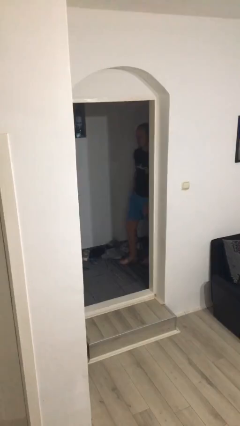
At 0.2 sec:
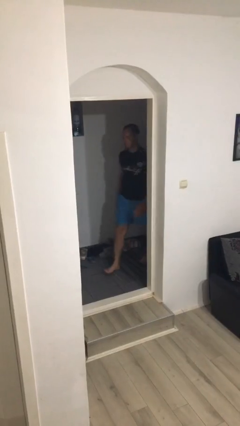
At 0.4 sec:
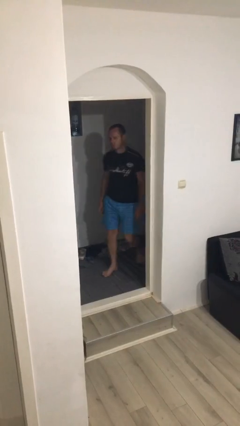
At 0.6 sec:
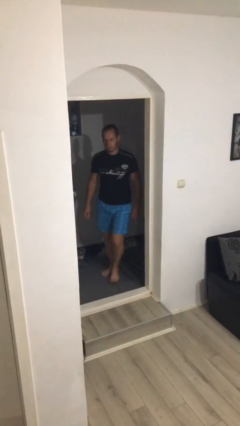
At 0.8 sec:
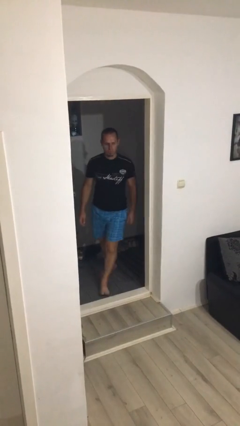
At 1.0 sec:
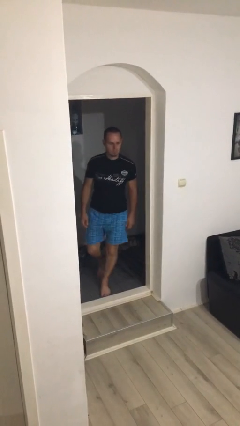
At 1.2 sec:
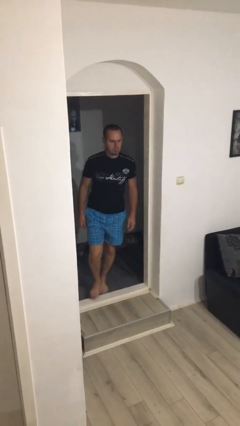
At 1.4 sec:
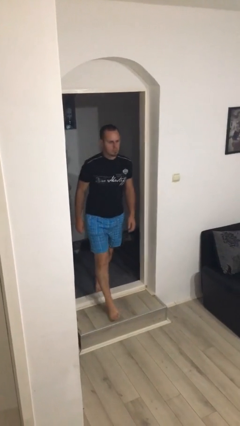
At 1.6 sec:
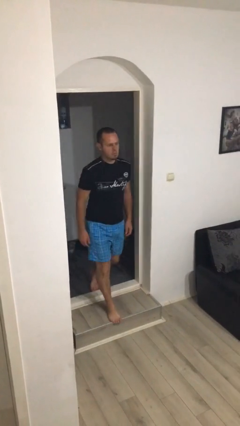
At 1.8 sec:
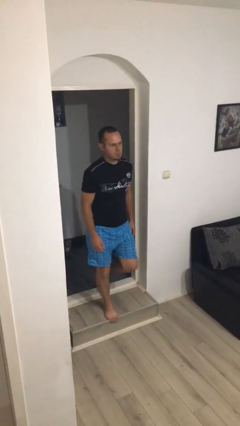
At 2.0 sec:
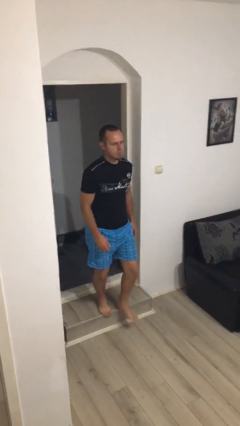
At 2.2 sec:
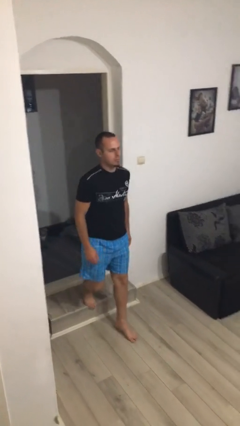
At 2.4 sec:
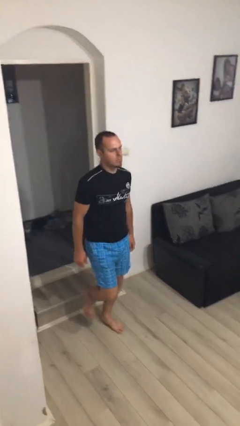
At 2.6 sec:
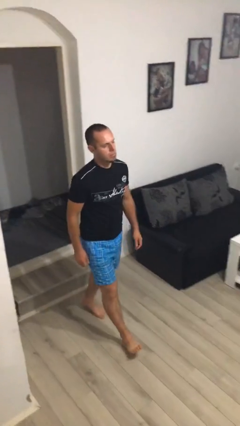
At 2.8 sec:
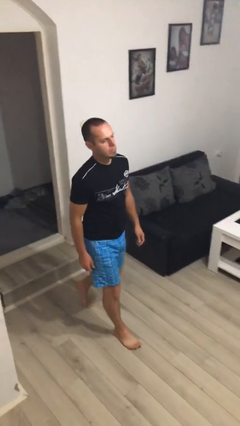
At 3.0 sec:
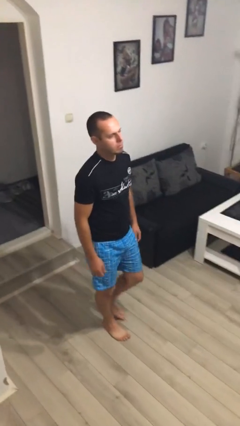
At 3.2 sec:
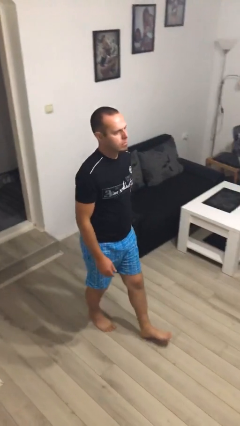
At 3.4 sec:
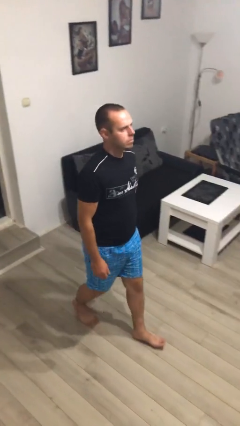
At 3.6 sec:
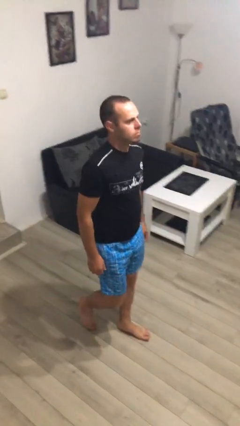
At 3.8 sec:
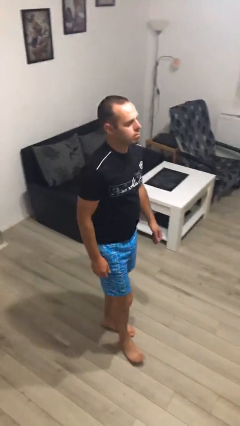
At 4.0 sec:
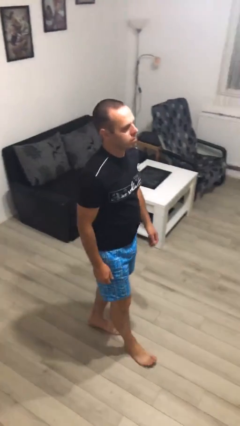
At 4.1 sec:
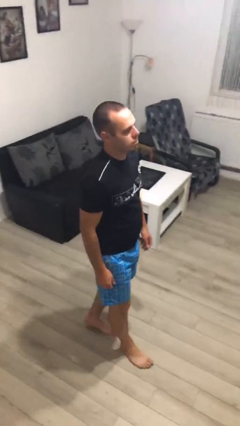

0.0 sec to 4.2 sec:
person enters scene through structure

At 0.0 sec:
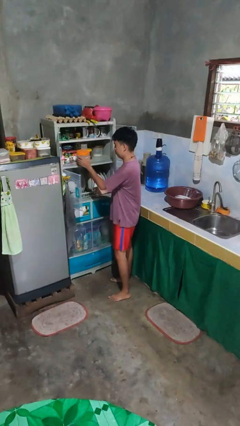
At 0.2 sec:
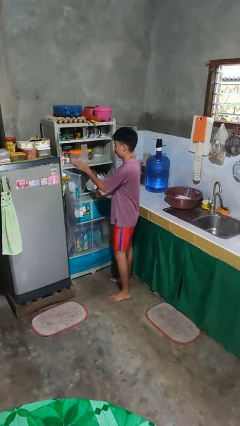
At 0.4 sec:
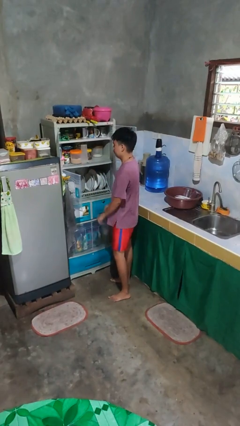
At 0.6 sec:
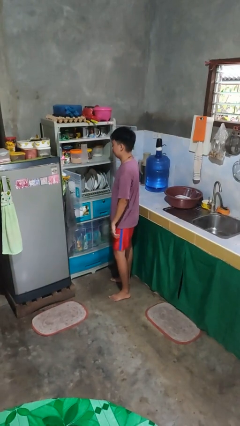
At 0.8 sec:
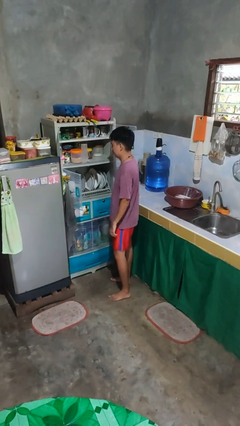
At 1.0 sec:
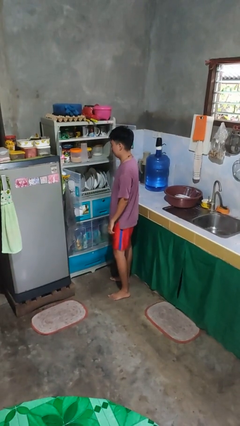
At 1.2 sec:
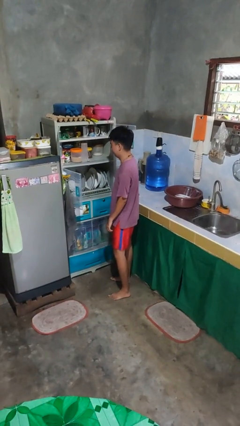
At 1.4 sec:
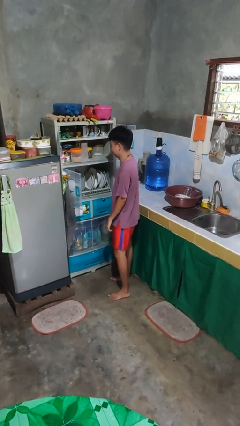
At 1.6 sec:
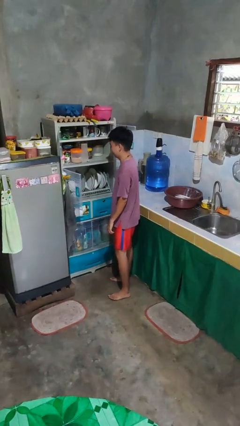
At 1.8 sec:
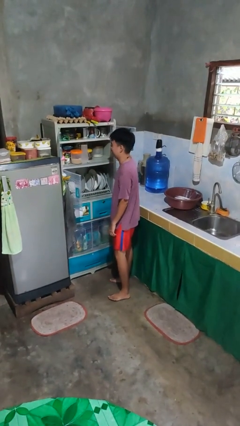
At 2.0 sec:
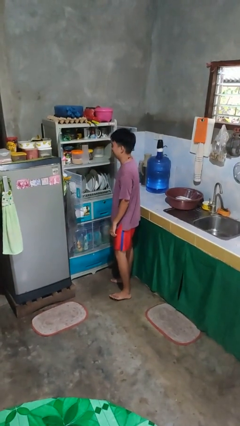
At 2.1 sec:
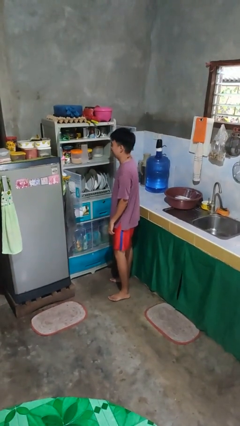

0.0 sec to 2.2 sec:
person puts object in cabinet

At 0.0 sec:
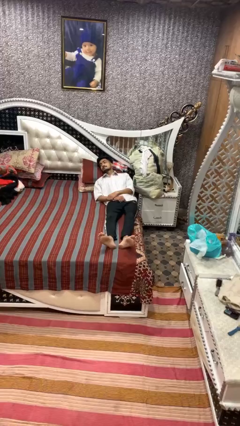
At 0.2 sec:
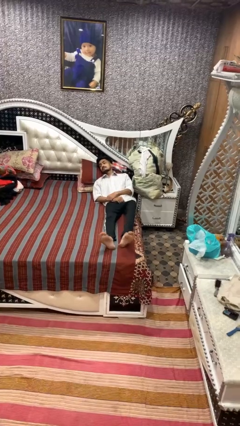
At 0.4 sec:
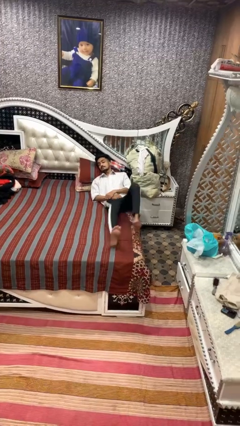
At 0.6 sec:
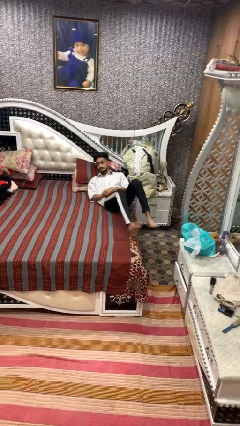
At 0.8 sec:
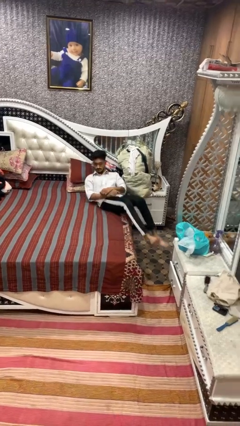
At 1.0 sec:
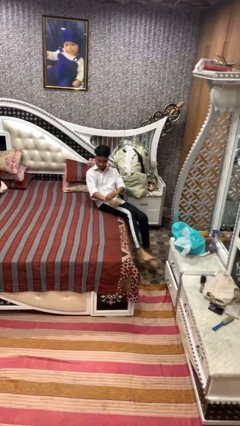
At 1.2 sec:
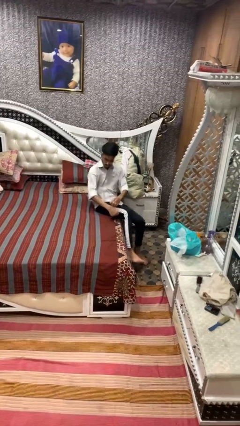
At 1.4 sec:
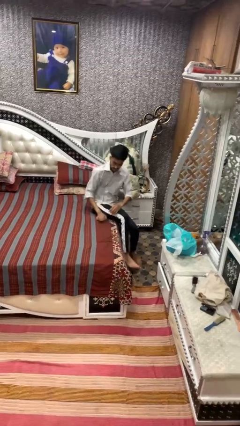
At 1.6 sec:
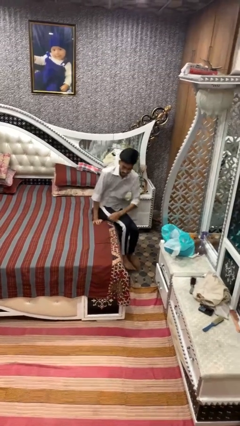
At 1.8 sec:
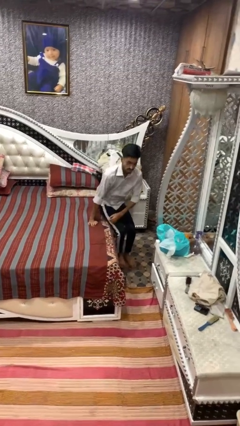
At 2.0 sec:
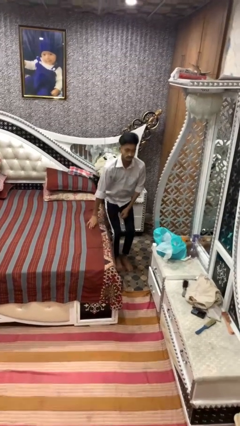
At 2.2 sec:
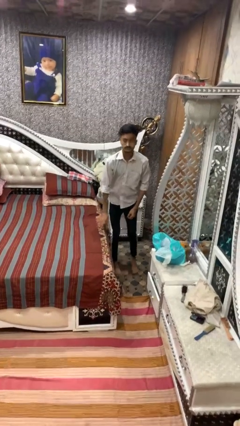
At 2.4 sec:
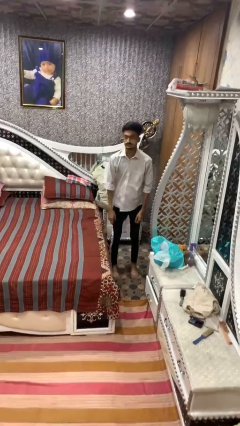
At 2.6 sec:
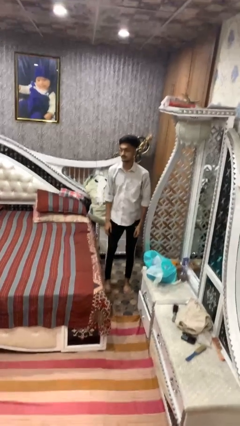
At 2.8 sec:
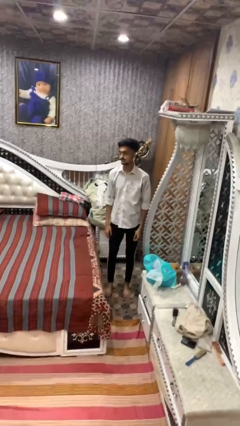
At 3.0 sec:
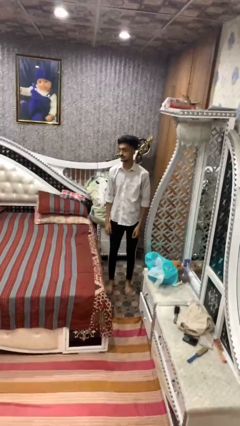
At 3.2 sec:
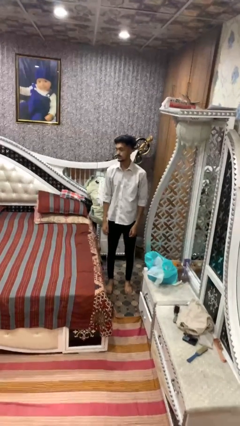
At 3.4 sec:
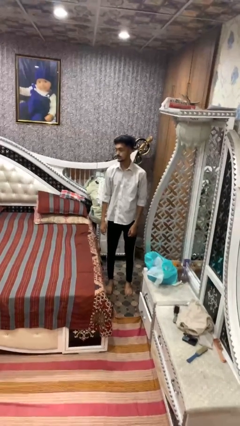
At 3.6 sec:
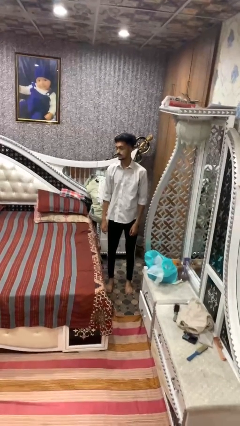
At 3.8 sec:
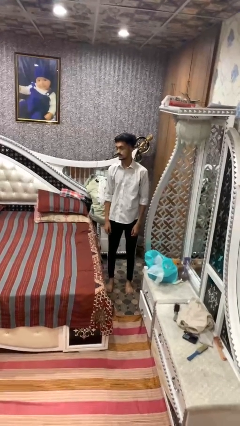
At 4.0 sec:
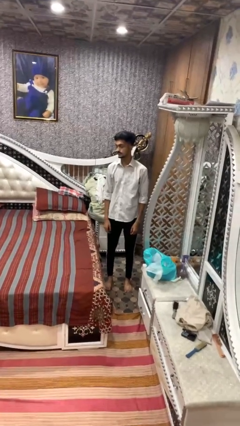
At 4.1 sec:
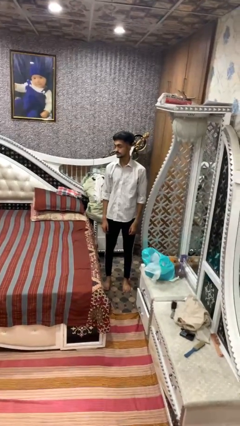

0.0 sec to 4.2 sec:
person stands up

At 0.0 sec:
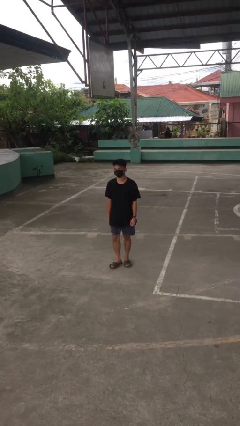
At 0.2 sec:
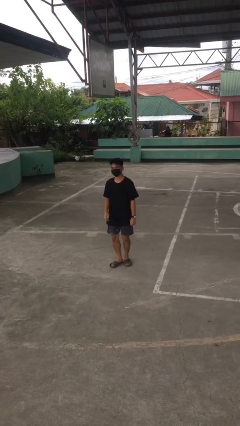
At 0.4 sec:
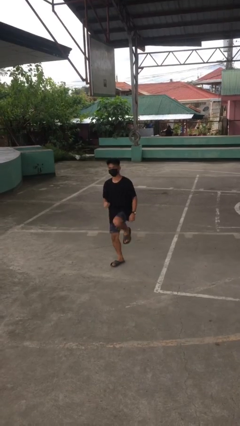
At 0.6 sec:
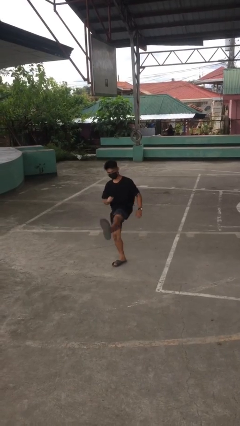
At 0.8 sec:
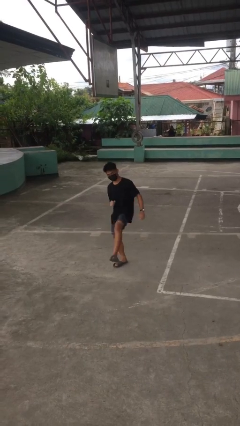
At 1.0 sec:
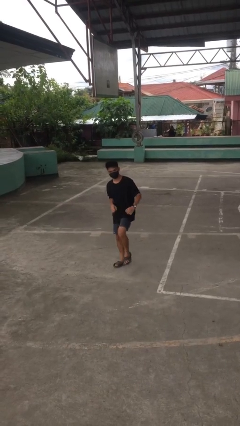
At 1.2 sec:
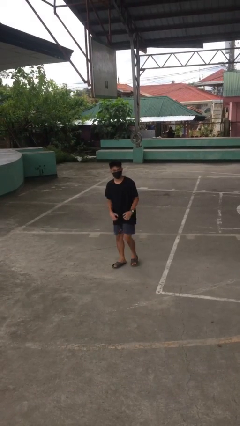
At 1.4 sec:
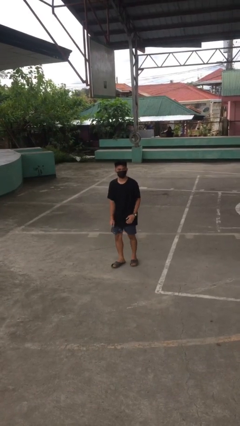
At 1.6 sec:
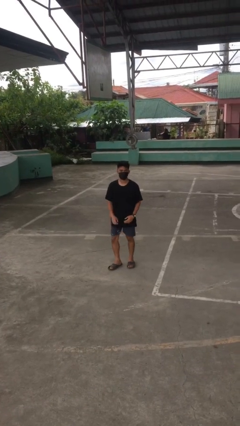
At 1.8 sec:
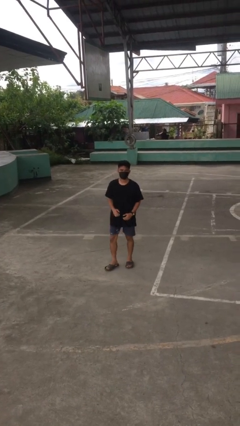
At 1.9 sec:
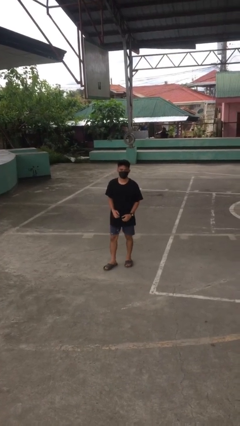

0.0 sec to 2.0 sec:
person karate kicks

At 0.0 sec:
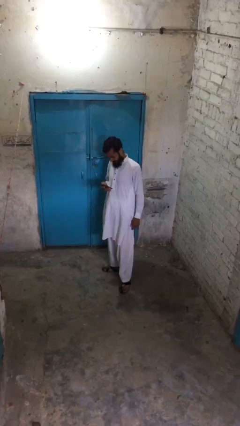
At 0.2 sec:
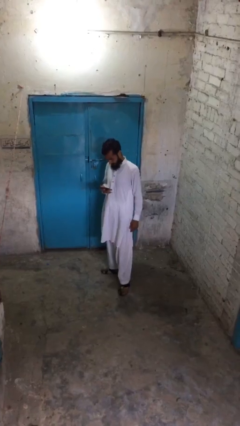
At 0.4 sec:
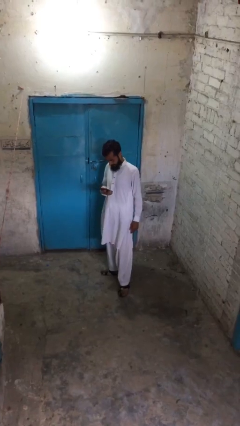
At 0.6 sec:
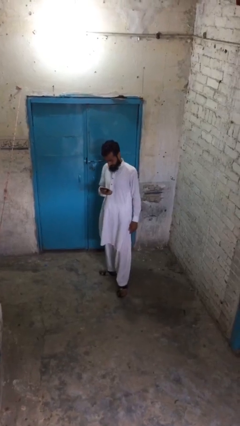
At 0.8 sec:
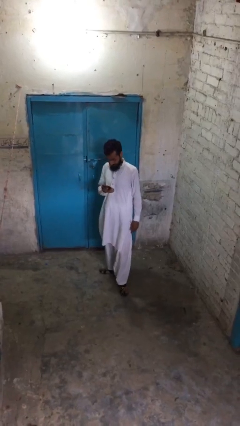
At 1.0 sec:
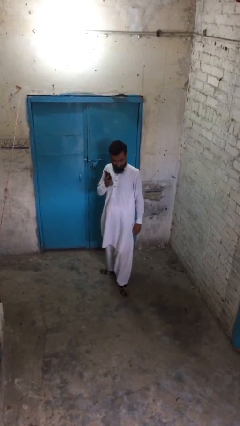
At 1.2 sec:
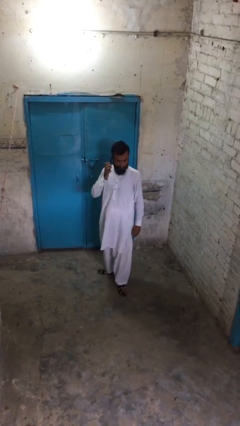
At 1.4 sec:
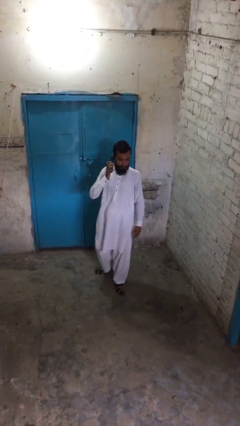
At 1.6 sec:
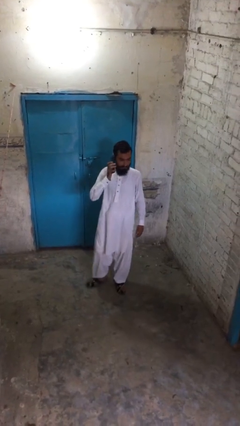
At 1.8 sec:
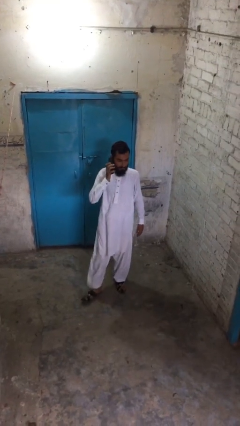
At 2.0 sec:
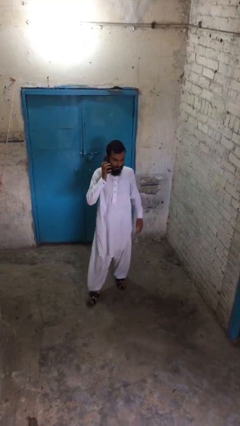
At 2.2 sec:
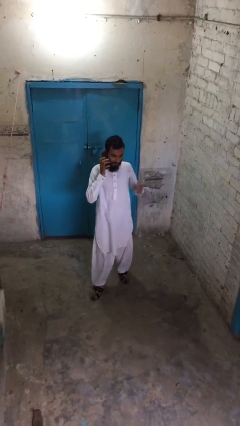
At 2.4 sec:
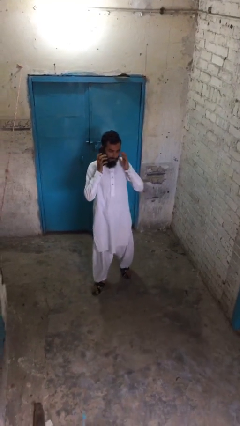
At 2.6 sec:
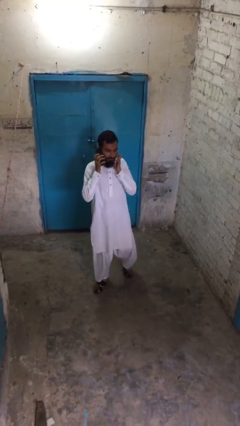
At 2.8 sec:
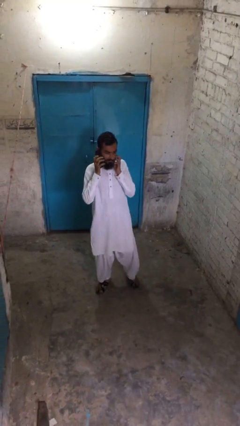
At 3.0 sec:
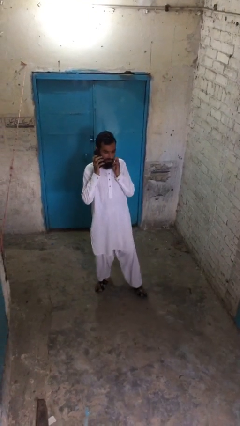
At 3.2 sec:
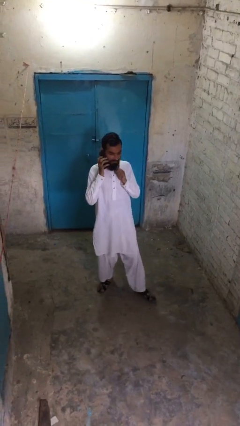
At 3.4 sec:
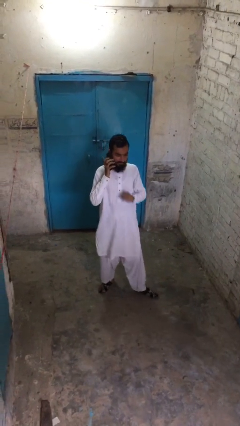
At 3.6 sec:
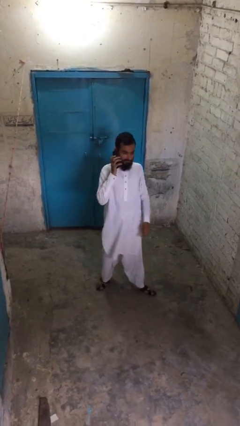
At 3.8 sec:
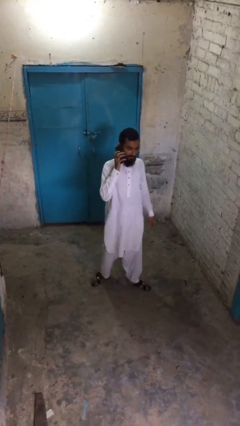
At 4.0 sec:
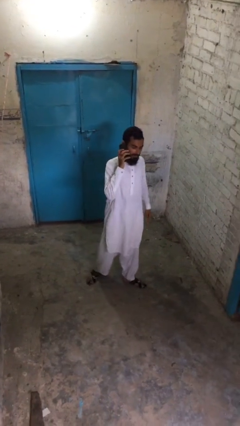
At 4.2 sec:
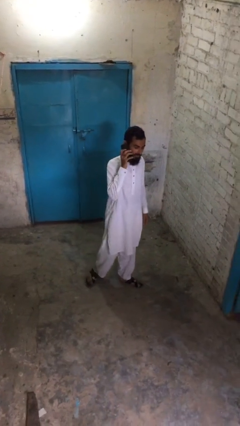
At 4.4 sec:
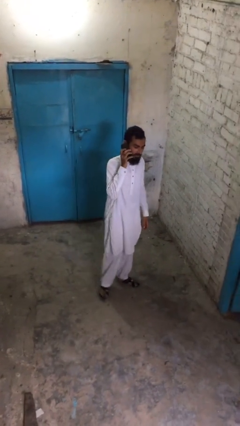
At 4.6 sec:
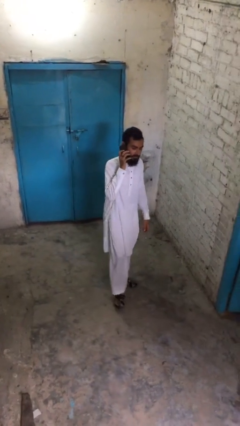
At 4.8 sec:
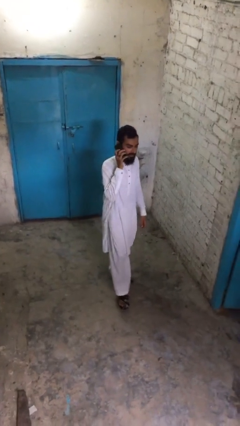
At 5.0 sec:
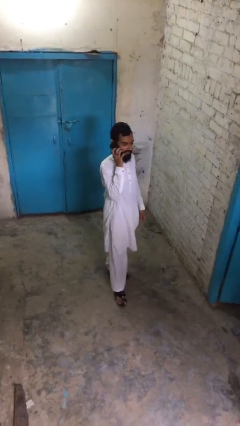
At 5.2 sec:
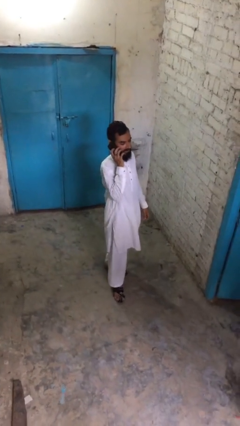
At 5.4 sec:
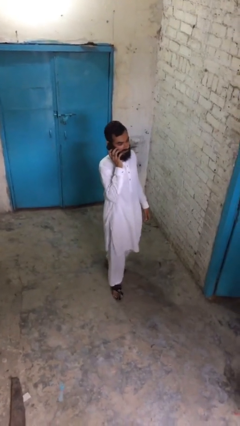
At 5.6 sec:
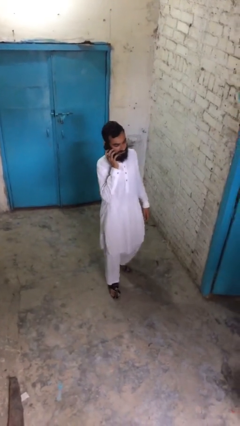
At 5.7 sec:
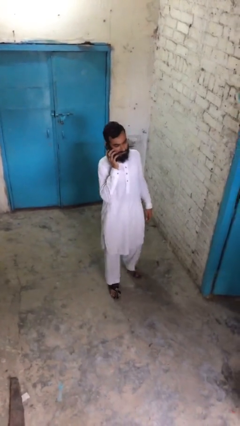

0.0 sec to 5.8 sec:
person talks on phone
